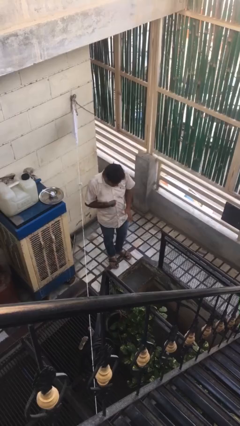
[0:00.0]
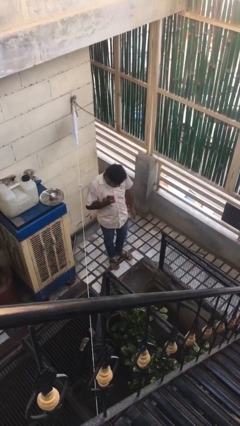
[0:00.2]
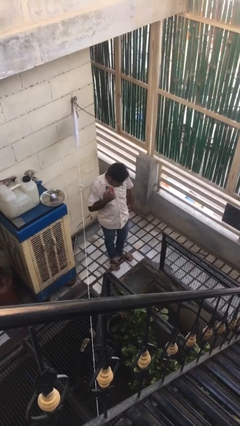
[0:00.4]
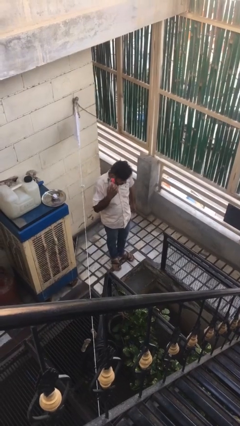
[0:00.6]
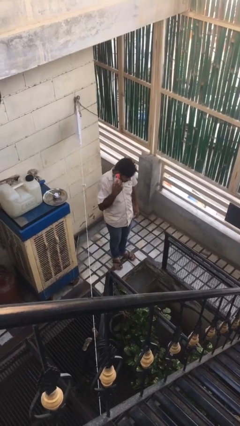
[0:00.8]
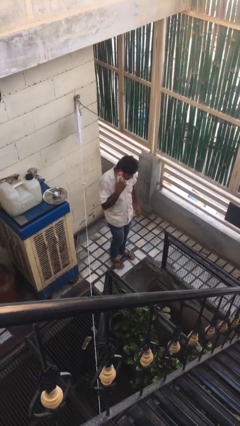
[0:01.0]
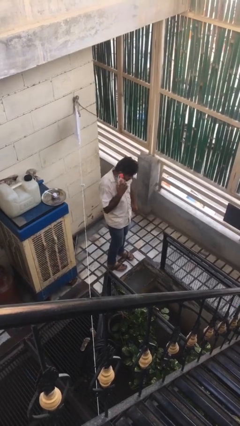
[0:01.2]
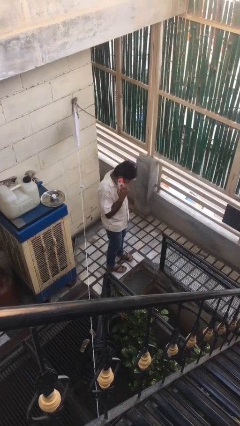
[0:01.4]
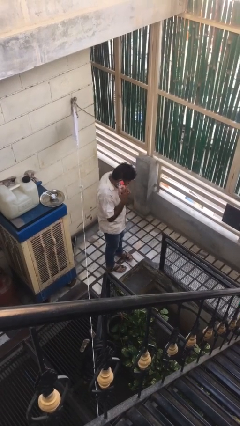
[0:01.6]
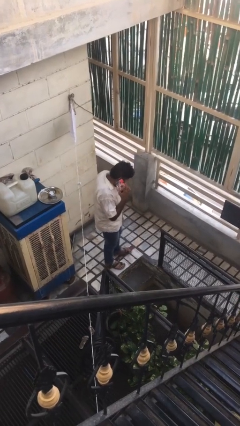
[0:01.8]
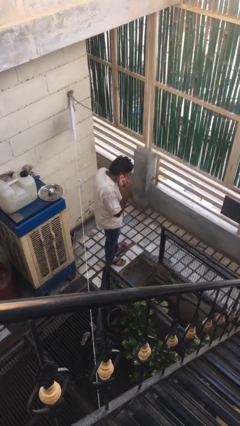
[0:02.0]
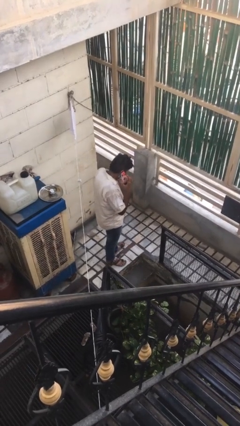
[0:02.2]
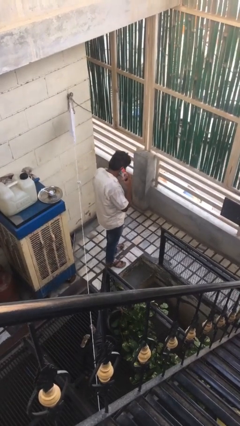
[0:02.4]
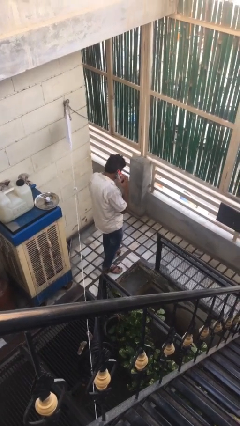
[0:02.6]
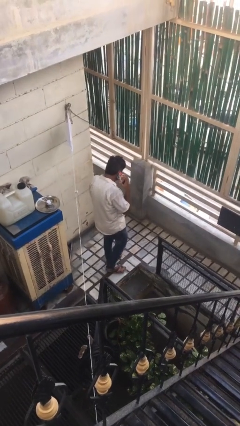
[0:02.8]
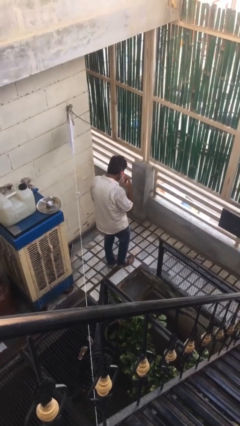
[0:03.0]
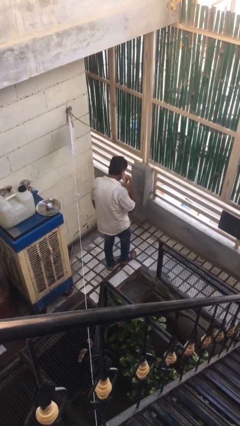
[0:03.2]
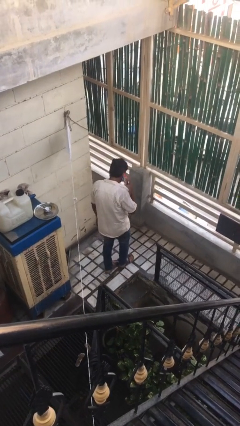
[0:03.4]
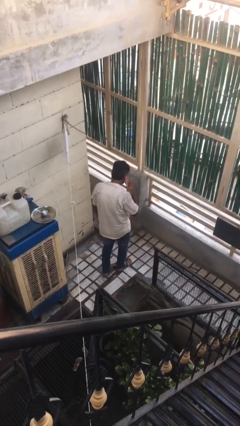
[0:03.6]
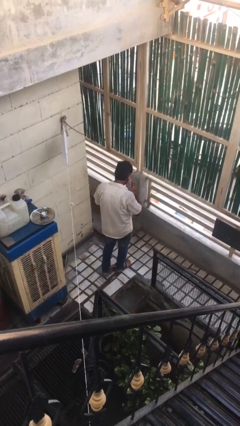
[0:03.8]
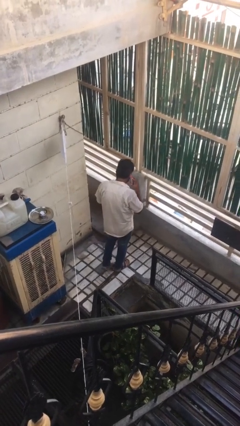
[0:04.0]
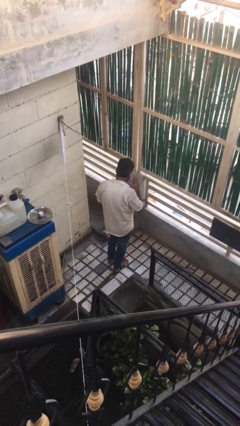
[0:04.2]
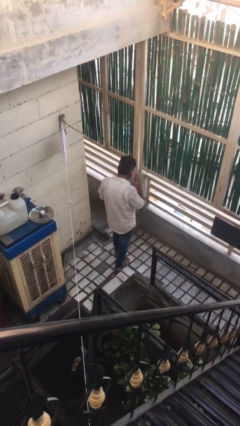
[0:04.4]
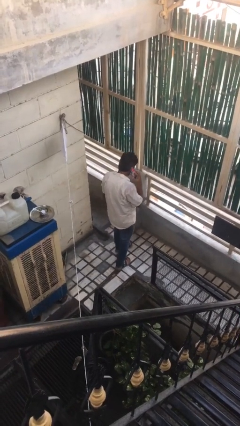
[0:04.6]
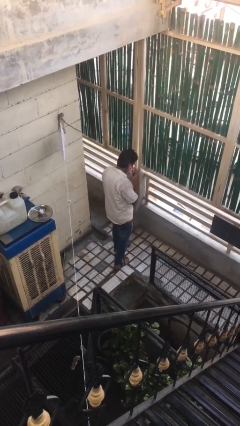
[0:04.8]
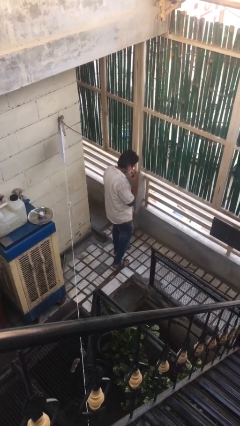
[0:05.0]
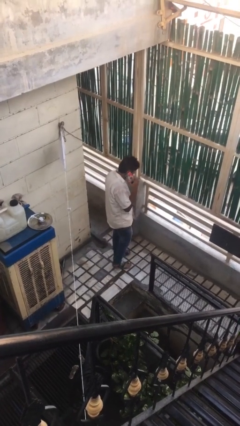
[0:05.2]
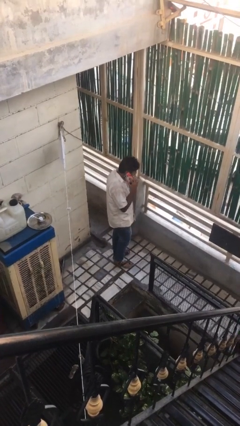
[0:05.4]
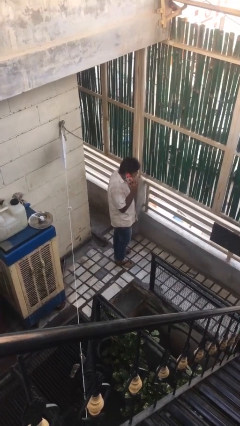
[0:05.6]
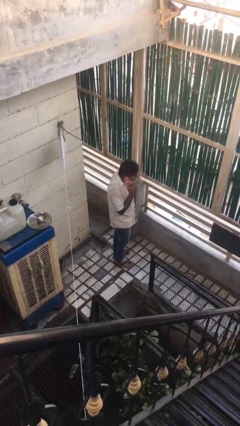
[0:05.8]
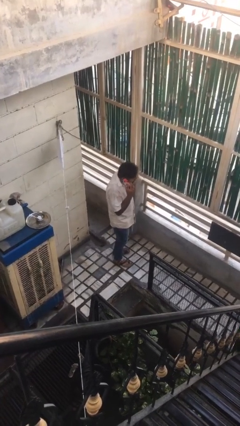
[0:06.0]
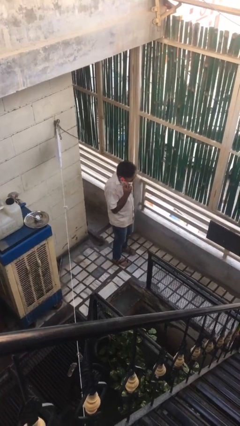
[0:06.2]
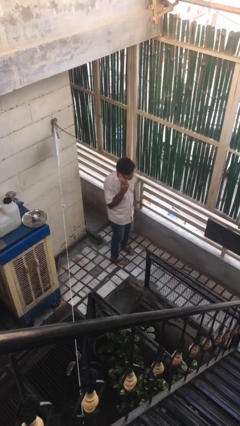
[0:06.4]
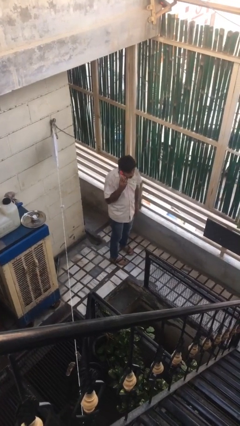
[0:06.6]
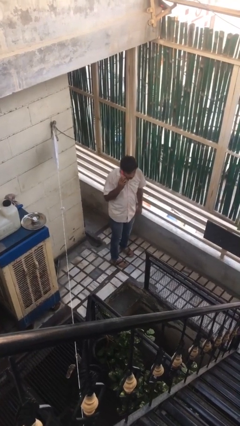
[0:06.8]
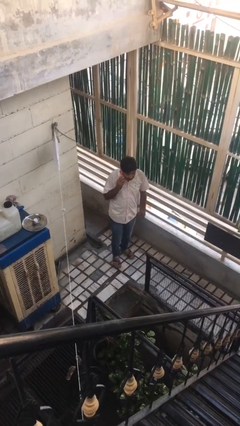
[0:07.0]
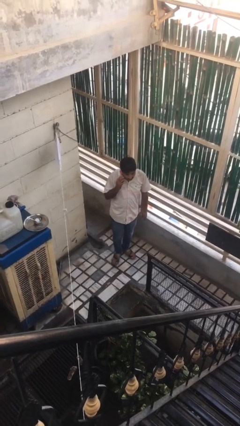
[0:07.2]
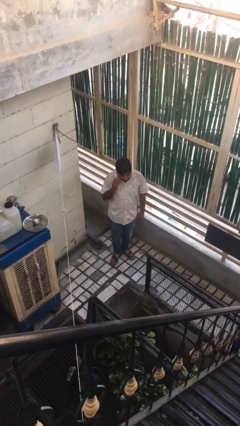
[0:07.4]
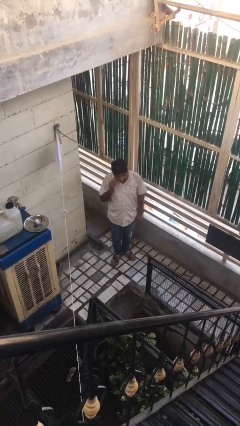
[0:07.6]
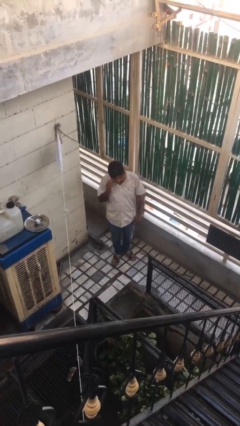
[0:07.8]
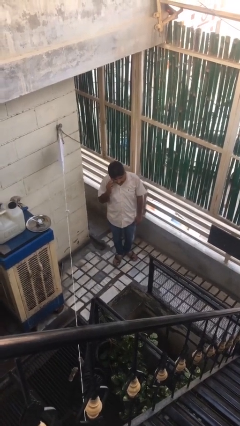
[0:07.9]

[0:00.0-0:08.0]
person talks on phone

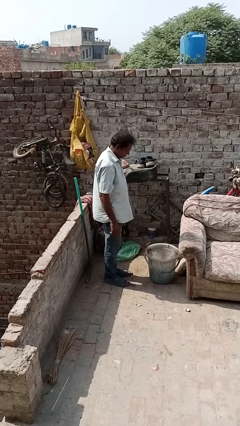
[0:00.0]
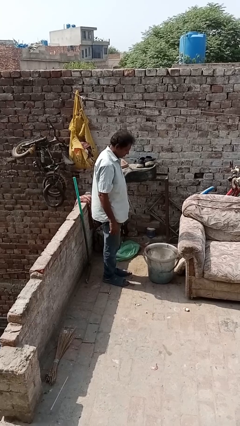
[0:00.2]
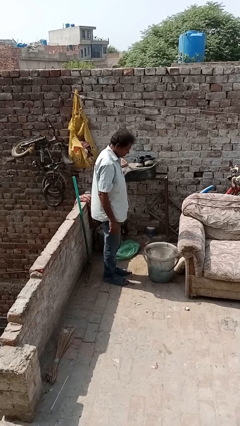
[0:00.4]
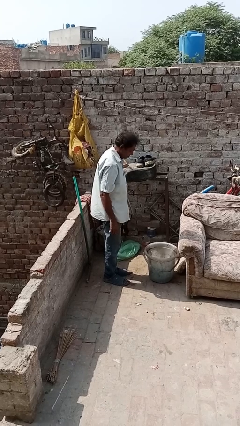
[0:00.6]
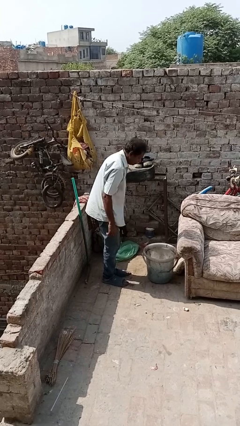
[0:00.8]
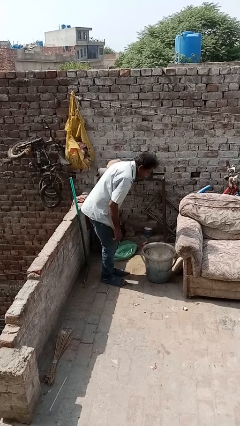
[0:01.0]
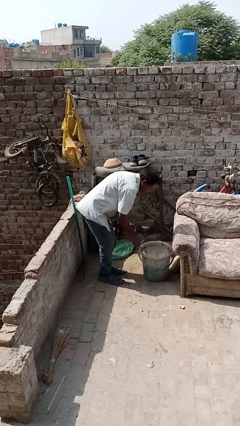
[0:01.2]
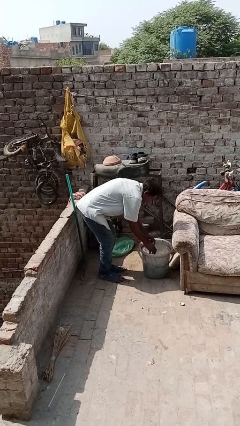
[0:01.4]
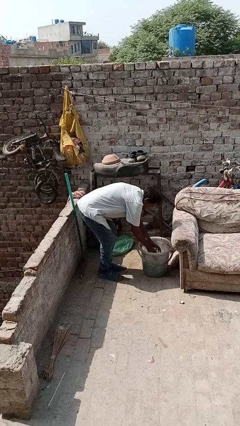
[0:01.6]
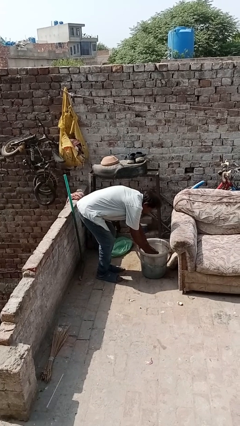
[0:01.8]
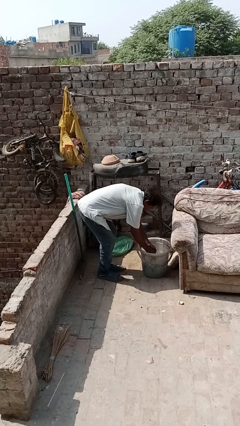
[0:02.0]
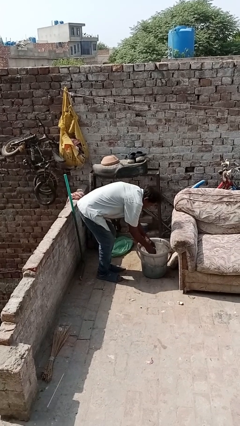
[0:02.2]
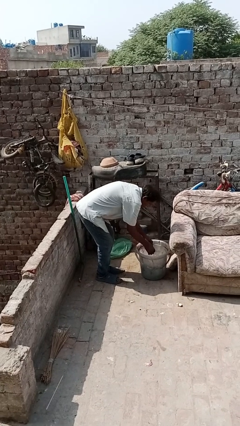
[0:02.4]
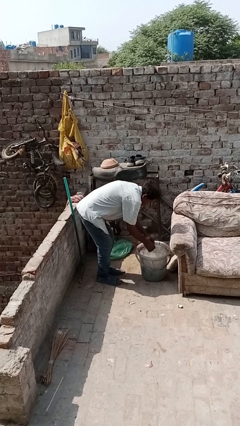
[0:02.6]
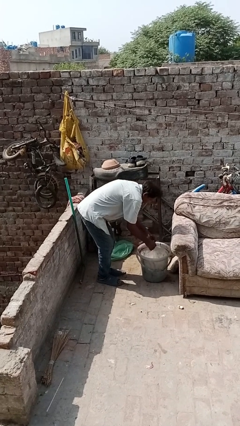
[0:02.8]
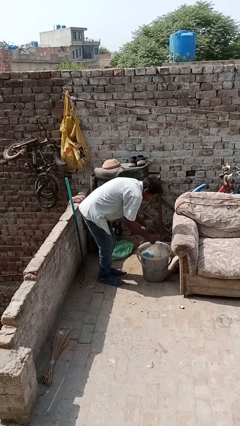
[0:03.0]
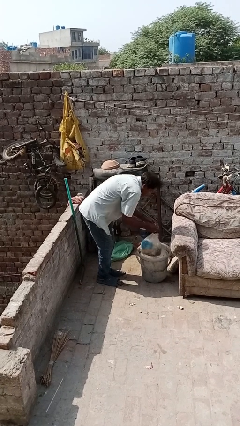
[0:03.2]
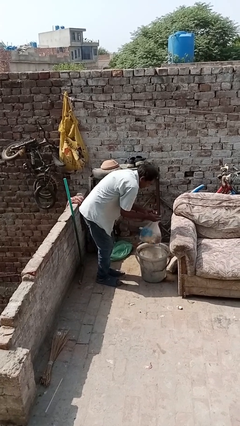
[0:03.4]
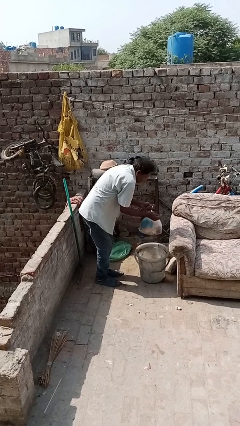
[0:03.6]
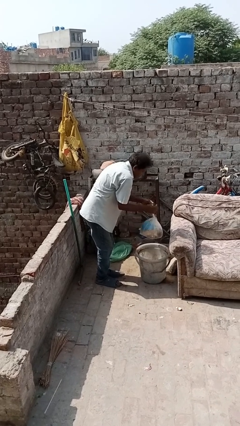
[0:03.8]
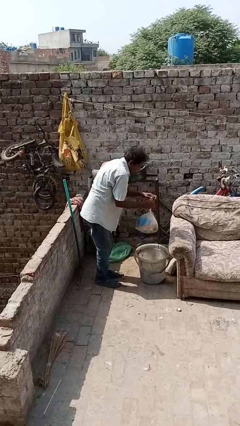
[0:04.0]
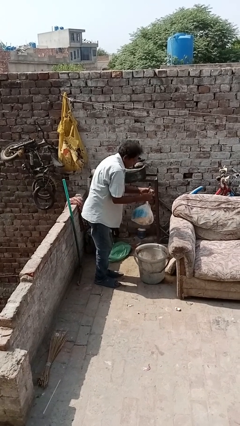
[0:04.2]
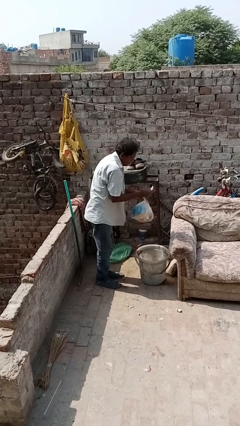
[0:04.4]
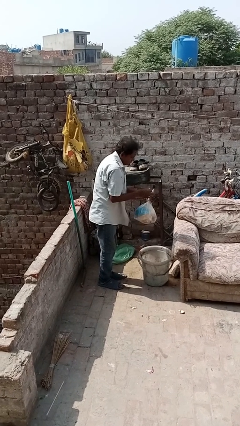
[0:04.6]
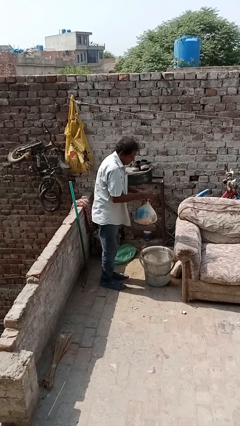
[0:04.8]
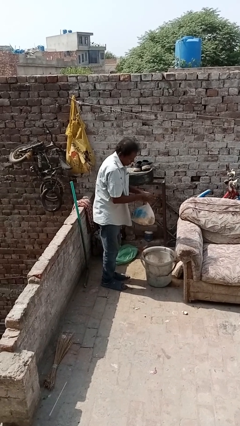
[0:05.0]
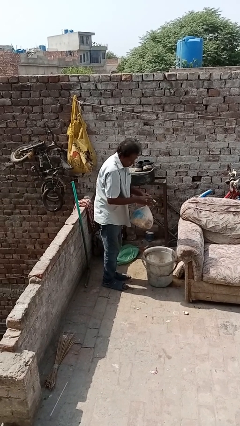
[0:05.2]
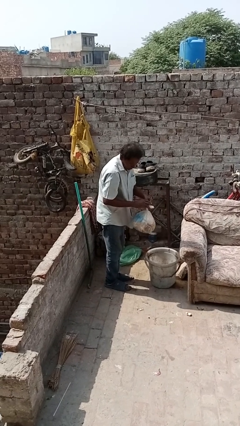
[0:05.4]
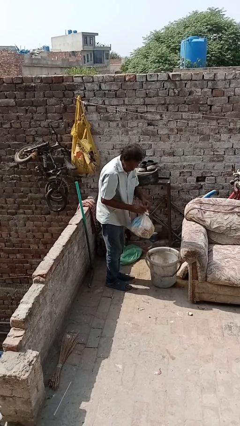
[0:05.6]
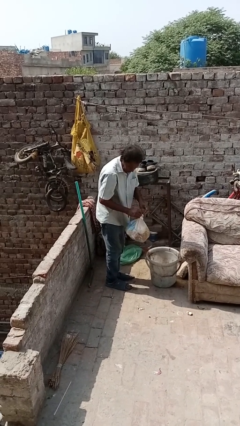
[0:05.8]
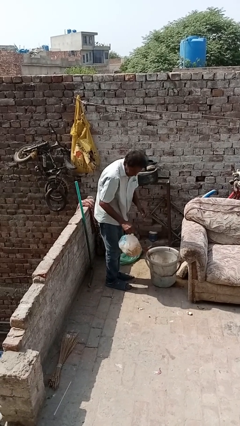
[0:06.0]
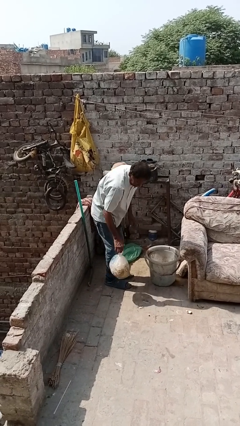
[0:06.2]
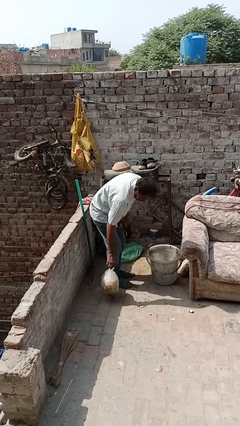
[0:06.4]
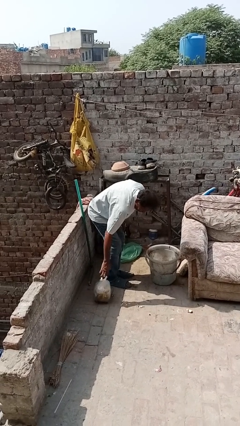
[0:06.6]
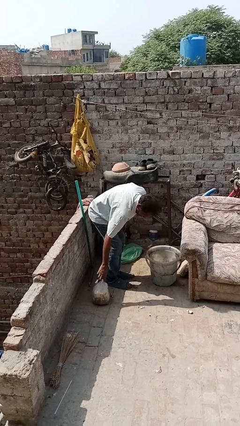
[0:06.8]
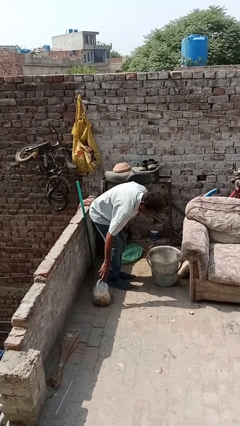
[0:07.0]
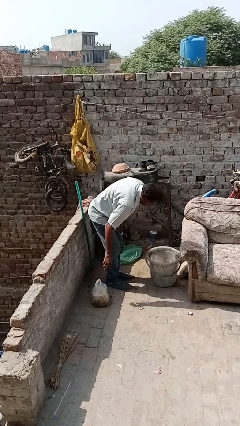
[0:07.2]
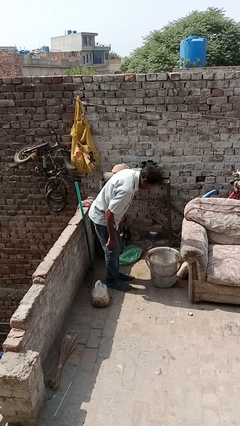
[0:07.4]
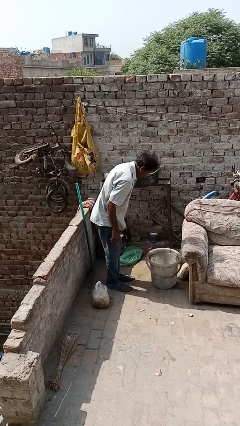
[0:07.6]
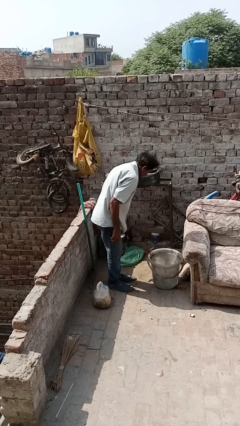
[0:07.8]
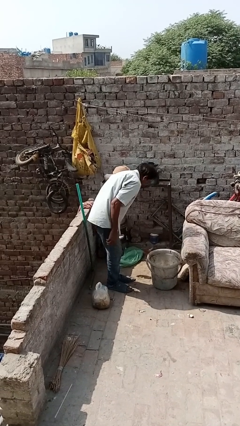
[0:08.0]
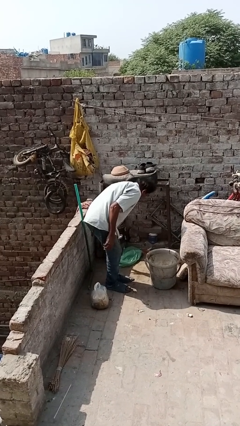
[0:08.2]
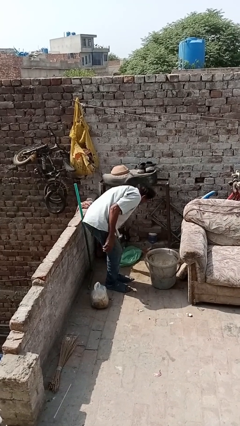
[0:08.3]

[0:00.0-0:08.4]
person removes trashbag from trashcan

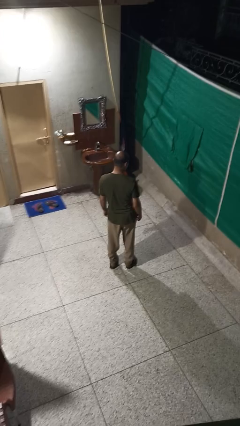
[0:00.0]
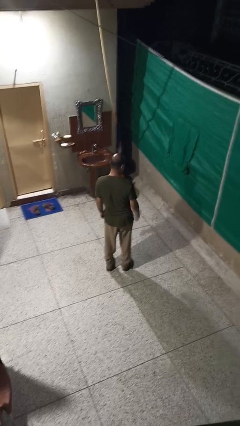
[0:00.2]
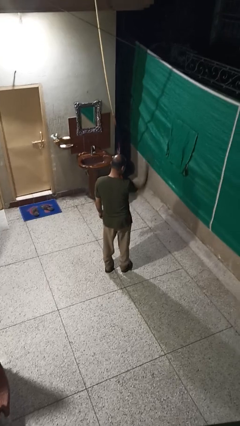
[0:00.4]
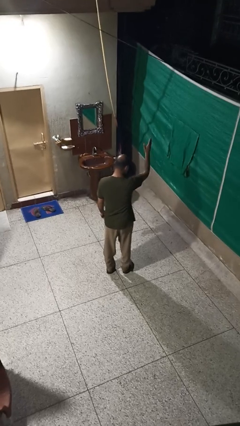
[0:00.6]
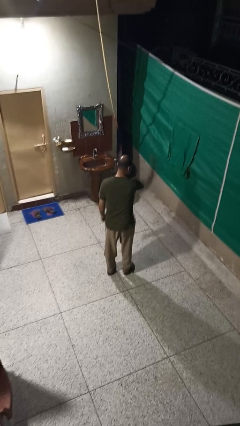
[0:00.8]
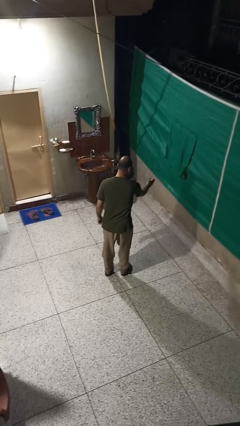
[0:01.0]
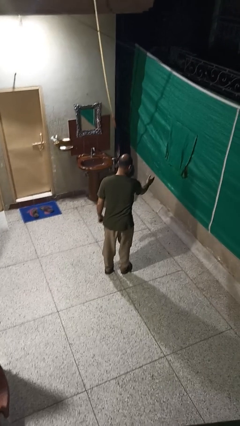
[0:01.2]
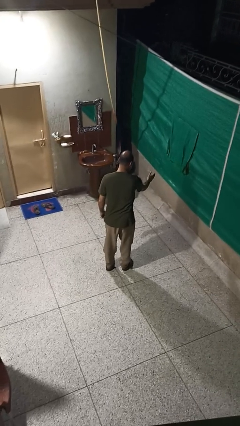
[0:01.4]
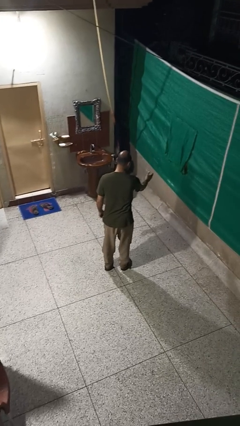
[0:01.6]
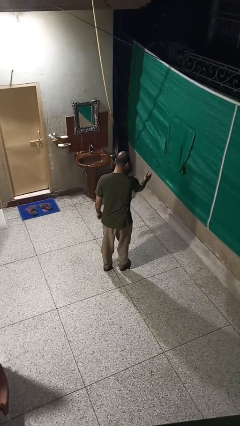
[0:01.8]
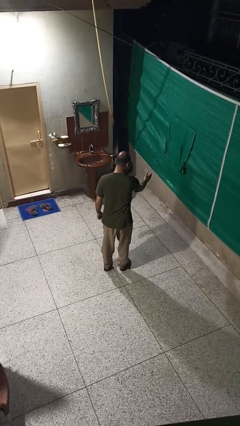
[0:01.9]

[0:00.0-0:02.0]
person karate chop
